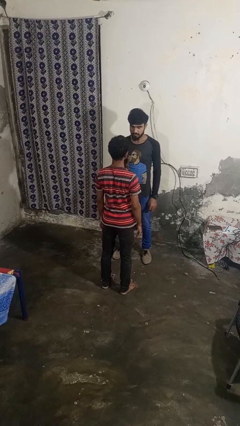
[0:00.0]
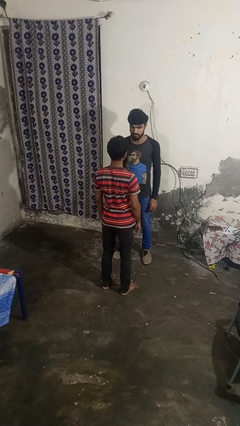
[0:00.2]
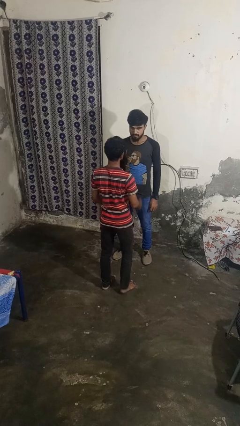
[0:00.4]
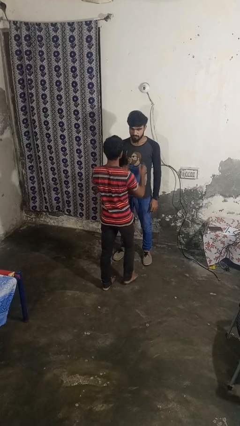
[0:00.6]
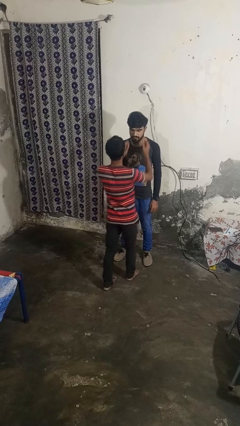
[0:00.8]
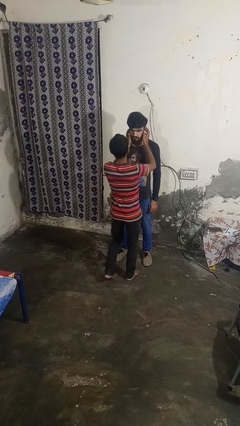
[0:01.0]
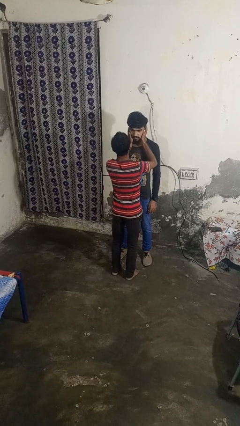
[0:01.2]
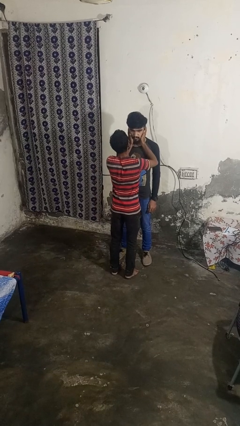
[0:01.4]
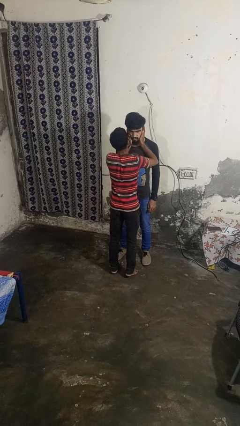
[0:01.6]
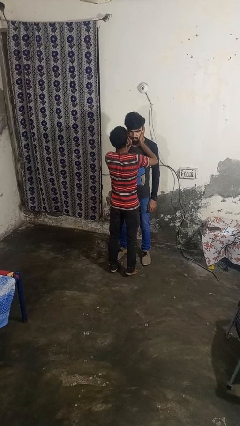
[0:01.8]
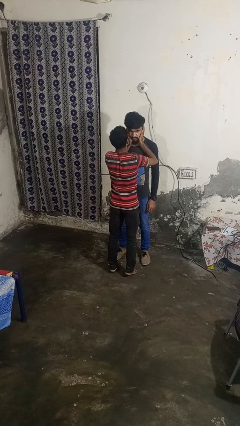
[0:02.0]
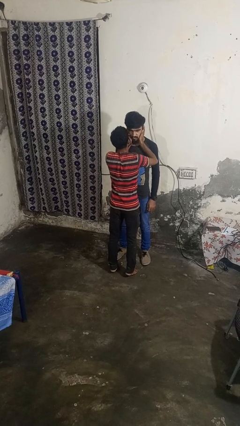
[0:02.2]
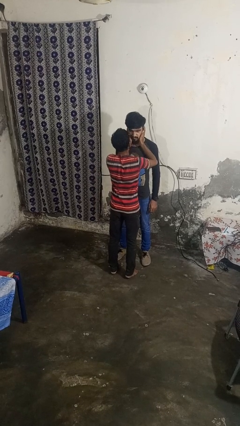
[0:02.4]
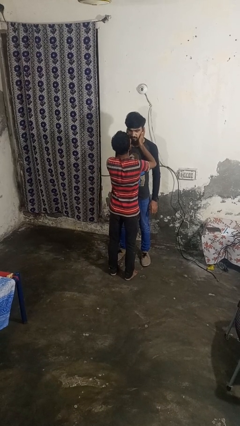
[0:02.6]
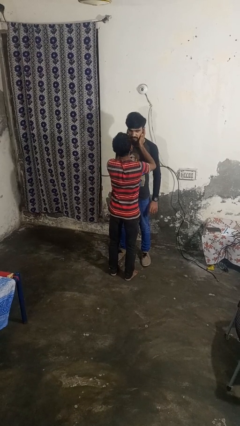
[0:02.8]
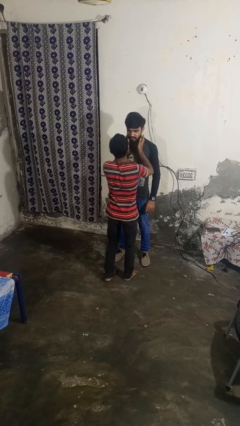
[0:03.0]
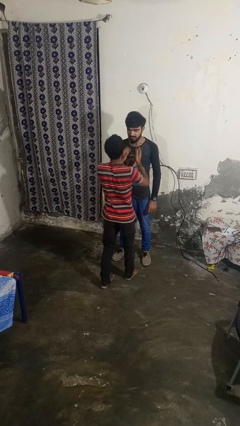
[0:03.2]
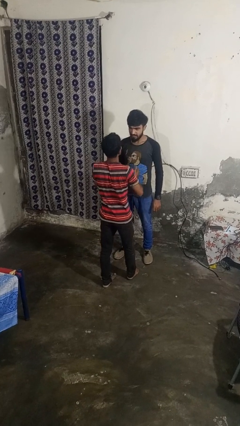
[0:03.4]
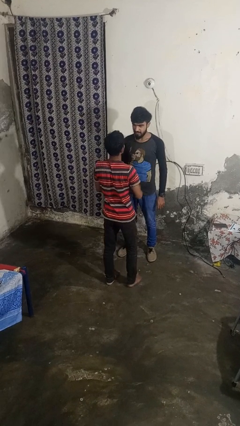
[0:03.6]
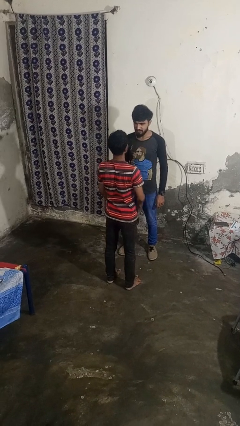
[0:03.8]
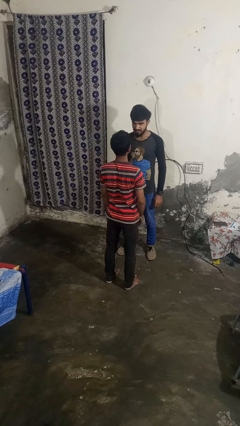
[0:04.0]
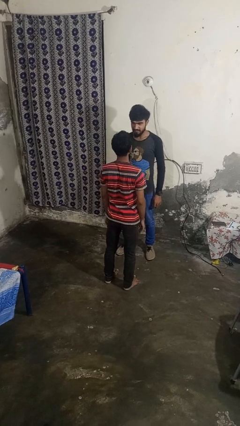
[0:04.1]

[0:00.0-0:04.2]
person kisses cheek of person

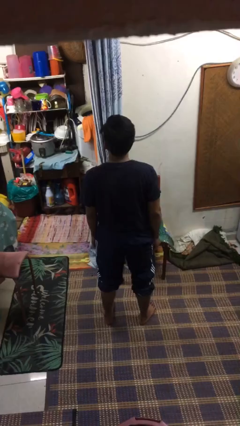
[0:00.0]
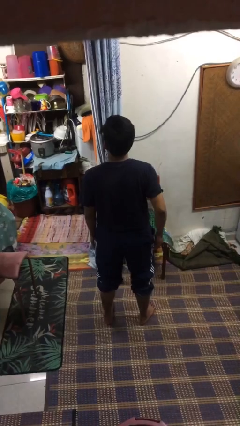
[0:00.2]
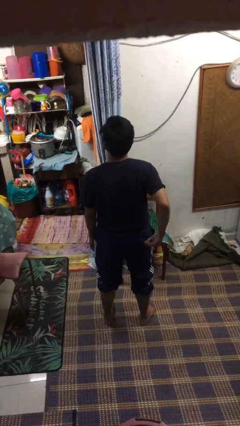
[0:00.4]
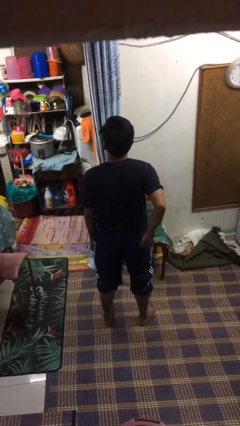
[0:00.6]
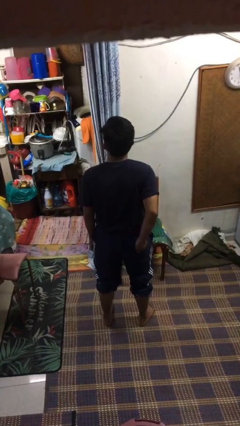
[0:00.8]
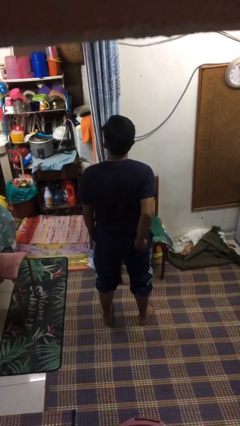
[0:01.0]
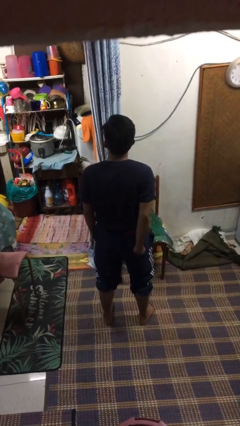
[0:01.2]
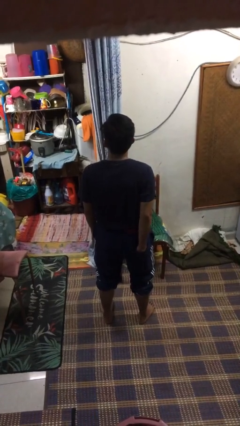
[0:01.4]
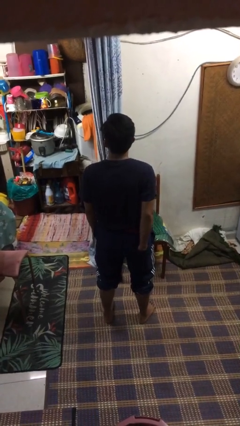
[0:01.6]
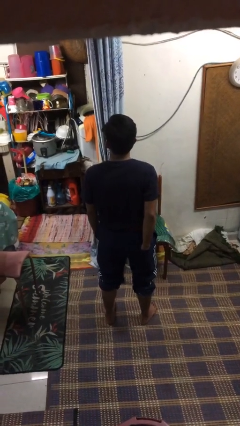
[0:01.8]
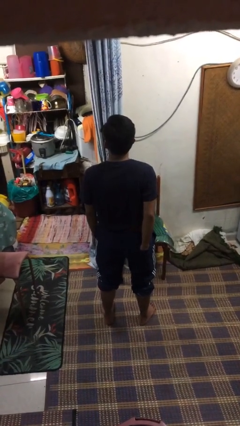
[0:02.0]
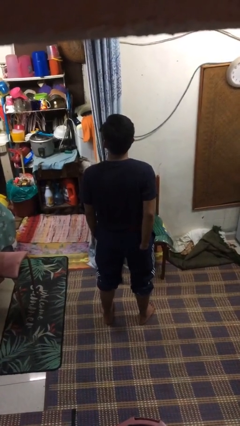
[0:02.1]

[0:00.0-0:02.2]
person puts hands in back pockets

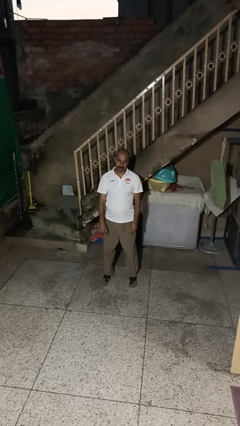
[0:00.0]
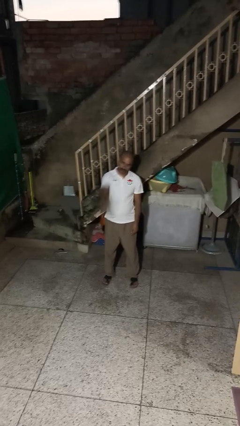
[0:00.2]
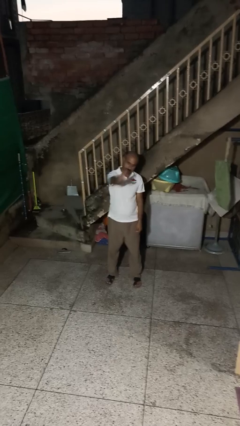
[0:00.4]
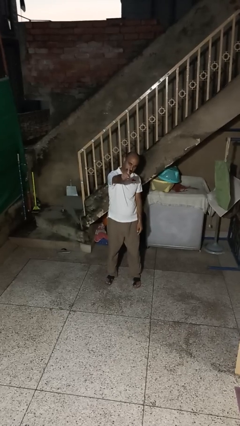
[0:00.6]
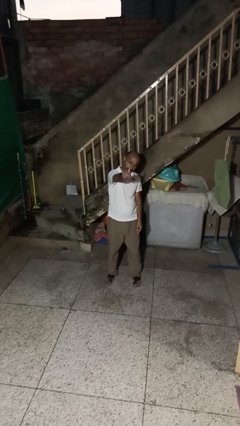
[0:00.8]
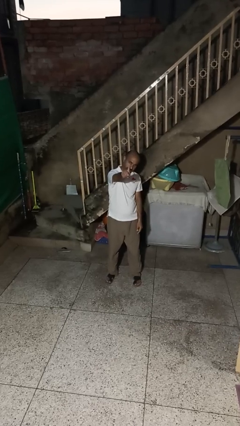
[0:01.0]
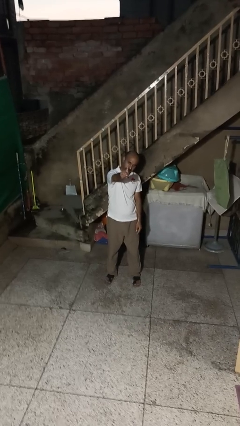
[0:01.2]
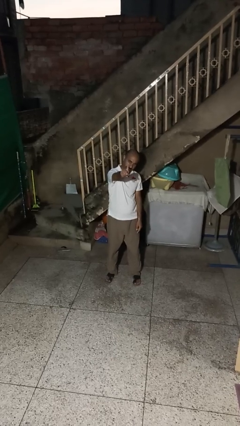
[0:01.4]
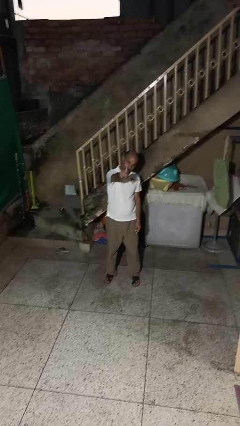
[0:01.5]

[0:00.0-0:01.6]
person gestures number one

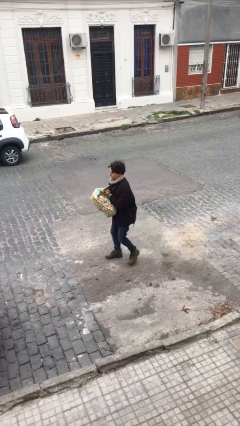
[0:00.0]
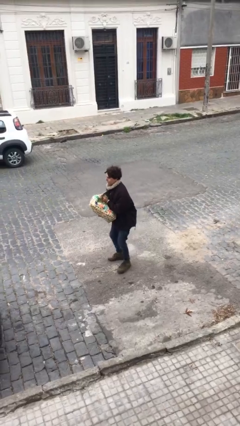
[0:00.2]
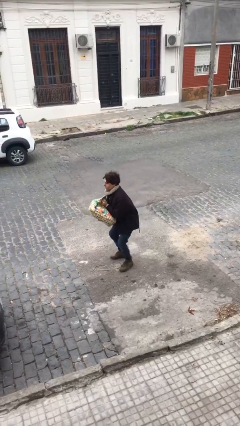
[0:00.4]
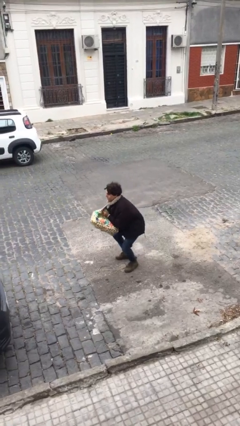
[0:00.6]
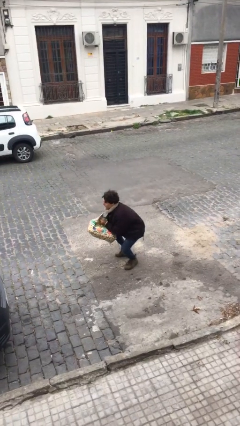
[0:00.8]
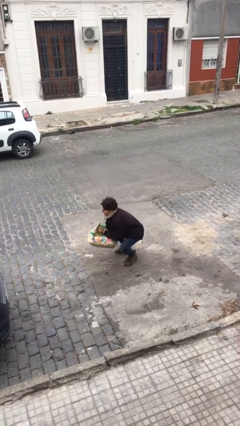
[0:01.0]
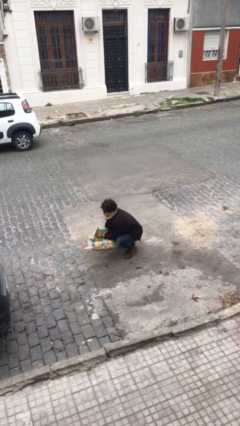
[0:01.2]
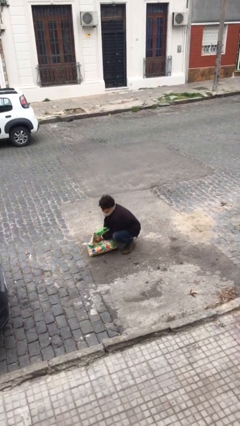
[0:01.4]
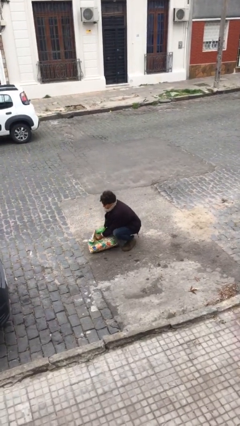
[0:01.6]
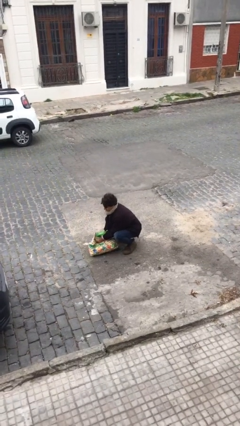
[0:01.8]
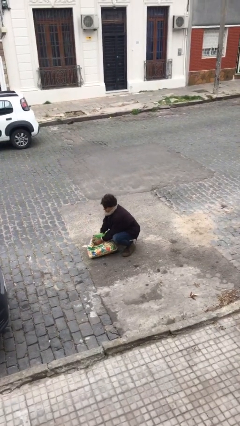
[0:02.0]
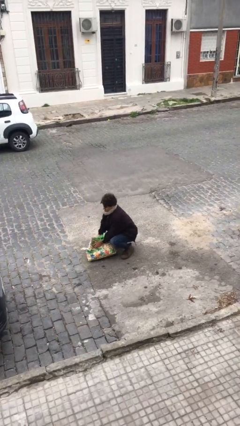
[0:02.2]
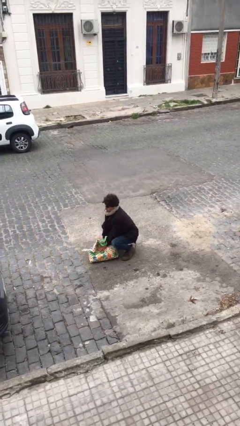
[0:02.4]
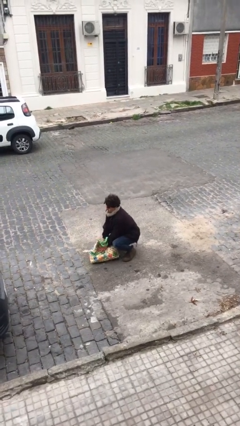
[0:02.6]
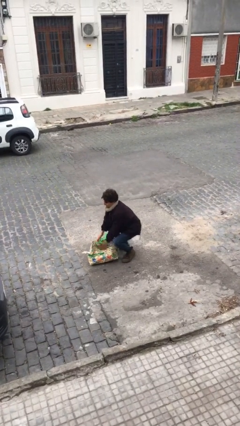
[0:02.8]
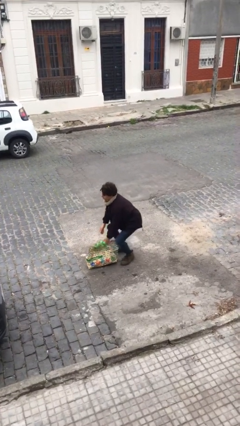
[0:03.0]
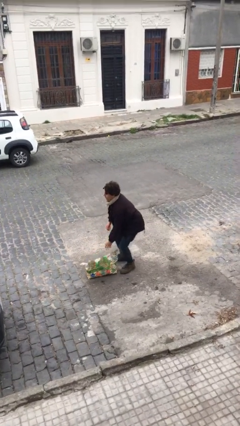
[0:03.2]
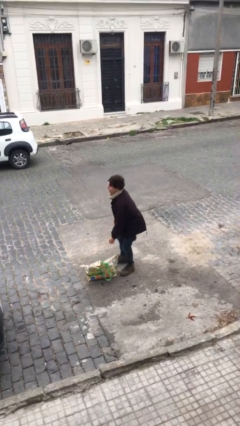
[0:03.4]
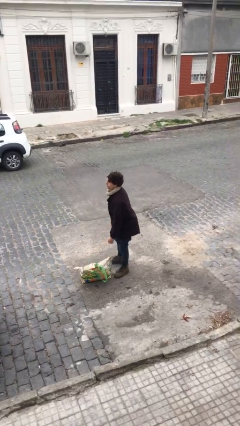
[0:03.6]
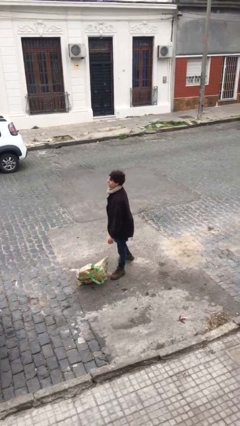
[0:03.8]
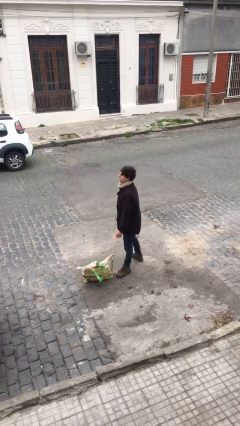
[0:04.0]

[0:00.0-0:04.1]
person puts down object on floor

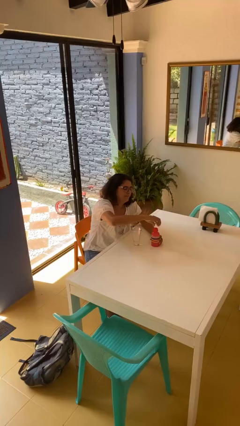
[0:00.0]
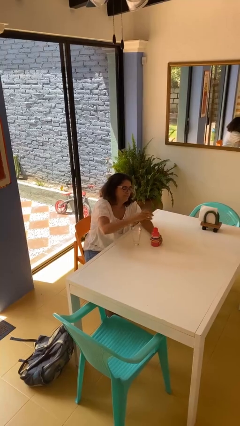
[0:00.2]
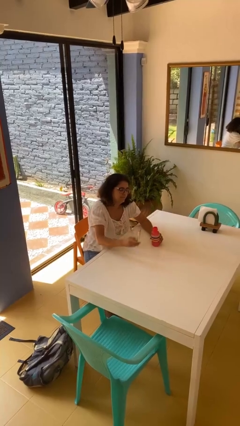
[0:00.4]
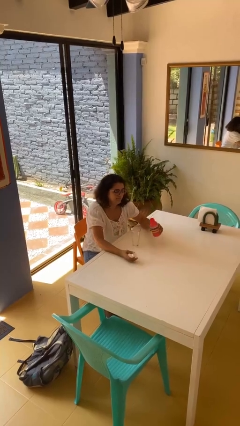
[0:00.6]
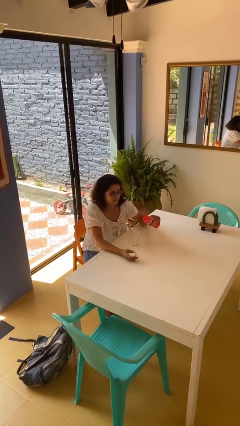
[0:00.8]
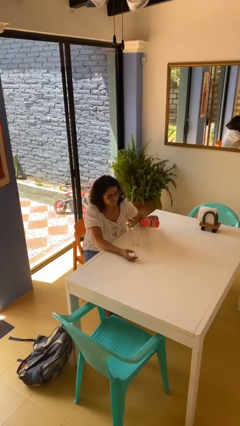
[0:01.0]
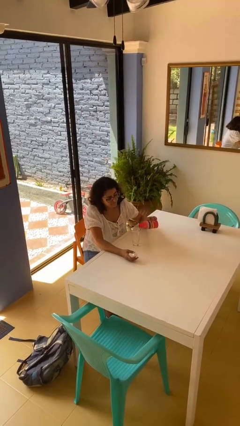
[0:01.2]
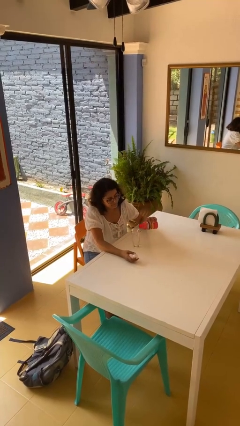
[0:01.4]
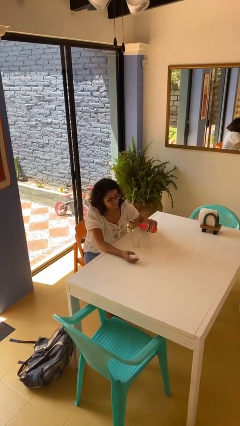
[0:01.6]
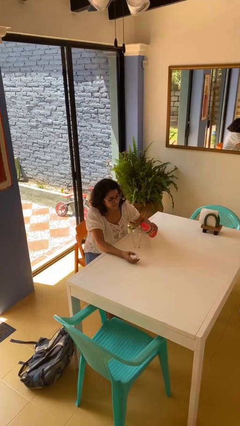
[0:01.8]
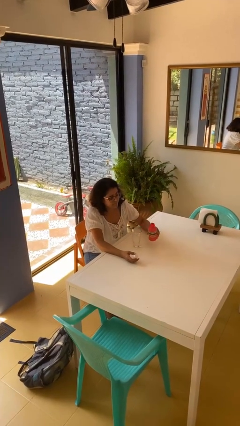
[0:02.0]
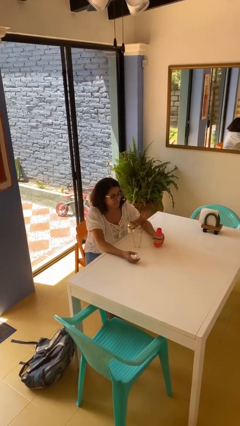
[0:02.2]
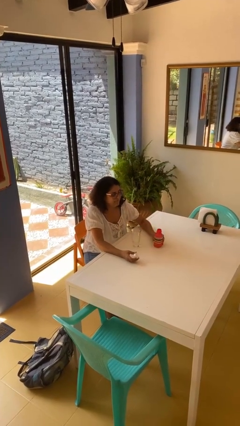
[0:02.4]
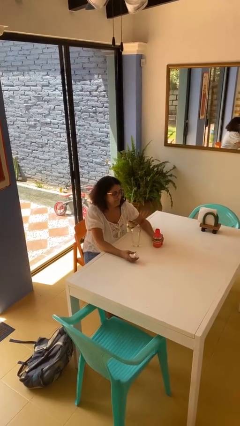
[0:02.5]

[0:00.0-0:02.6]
person pours liquid into cup

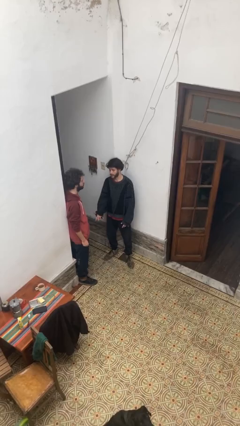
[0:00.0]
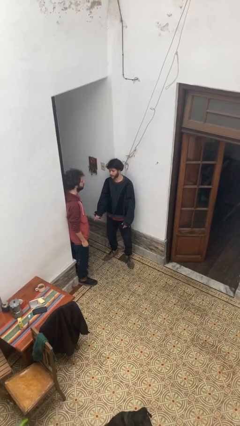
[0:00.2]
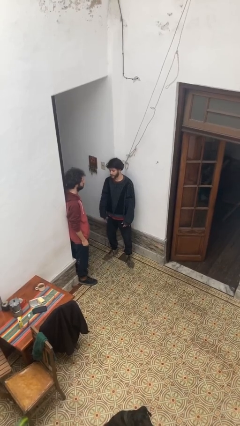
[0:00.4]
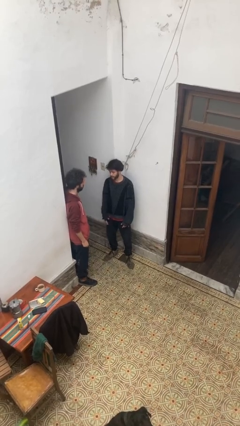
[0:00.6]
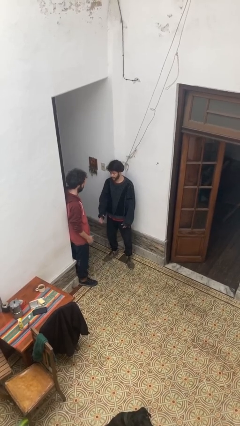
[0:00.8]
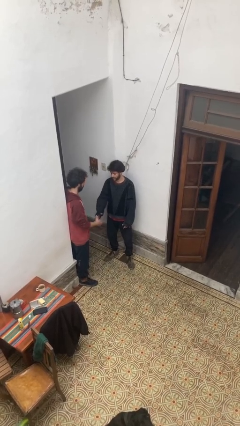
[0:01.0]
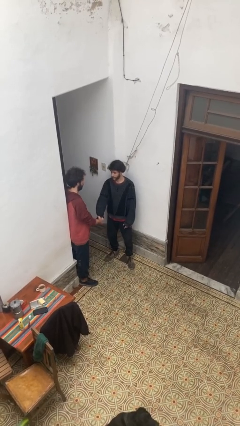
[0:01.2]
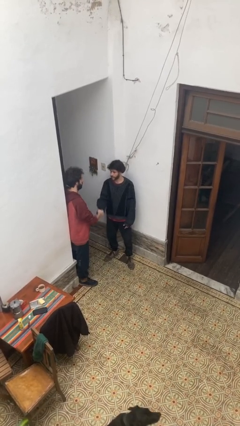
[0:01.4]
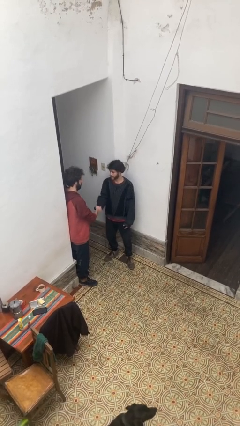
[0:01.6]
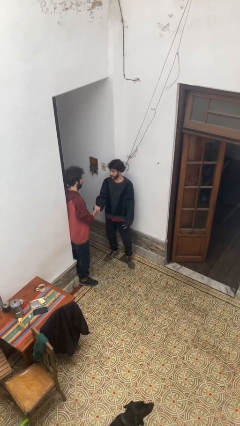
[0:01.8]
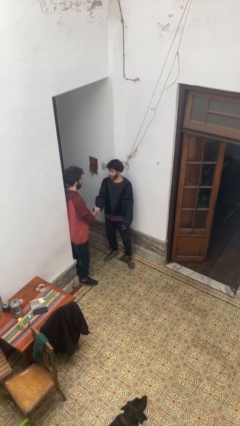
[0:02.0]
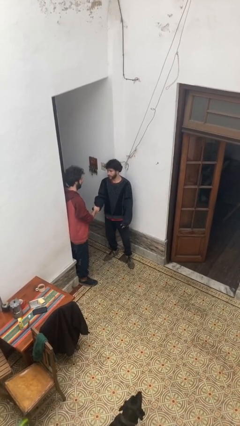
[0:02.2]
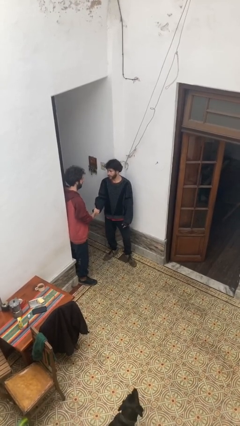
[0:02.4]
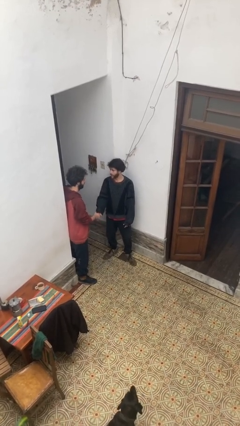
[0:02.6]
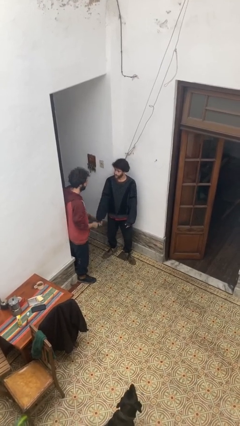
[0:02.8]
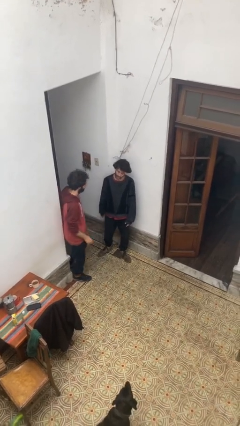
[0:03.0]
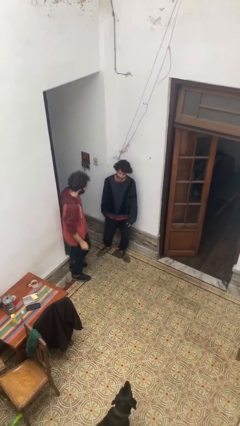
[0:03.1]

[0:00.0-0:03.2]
person shakes hand
